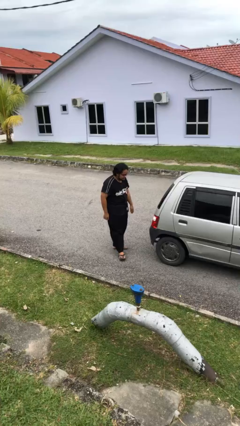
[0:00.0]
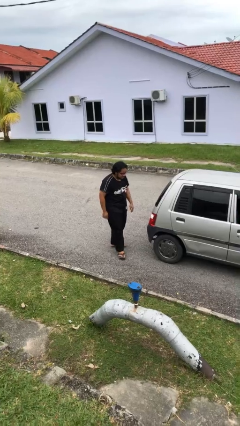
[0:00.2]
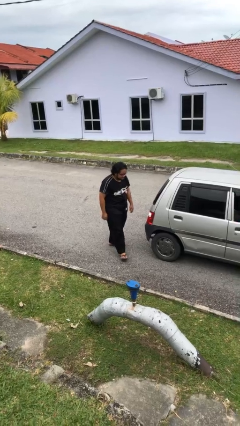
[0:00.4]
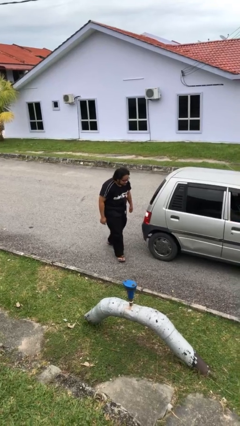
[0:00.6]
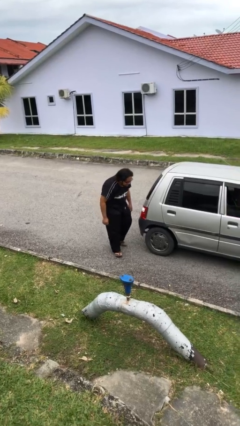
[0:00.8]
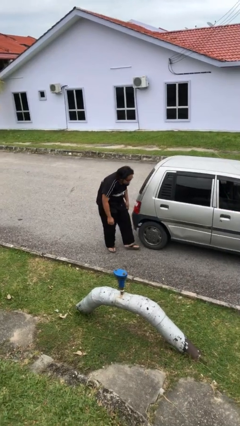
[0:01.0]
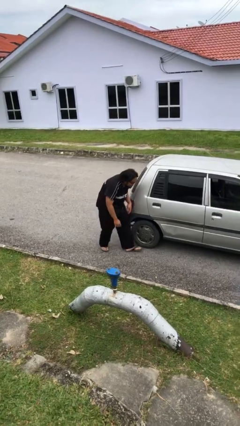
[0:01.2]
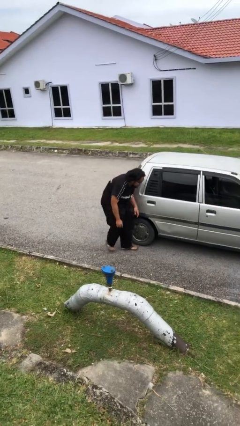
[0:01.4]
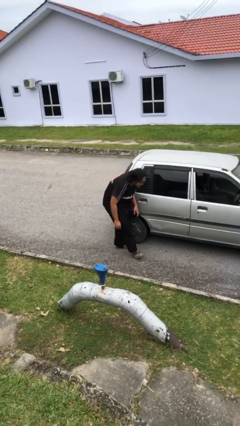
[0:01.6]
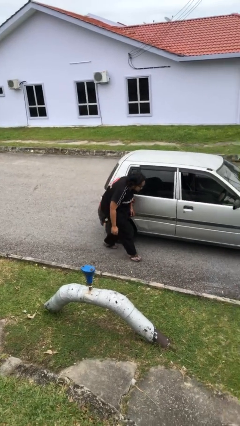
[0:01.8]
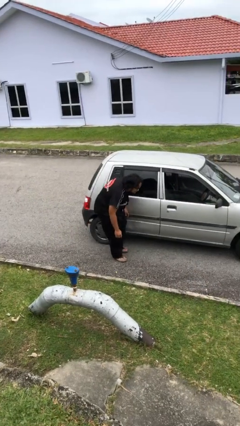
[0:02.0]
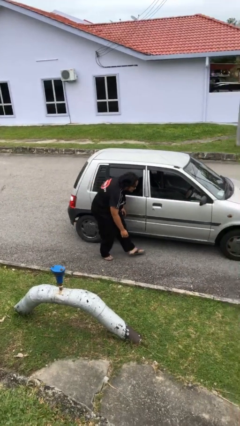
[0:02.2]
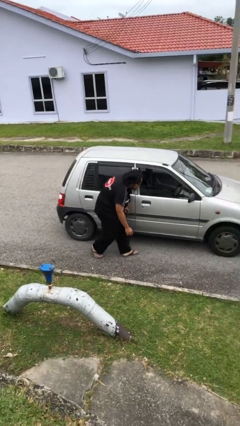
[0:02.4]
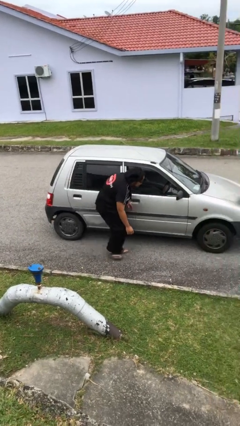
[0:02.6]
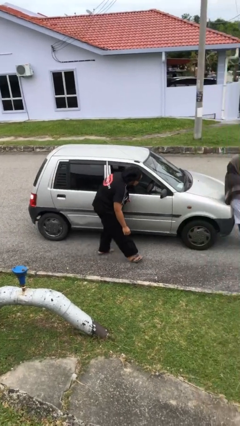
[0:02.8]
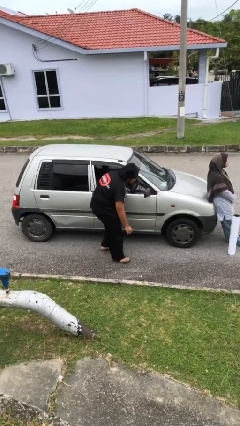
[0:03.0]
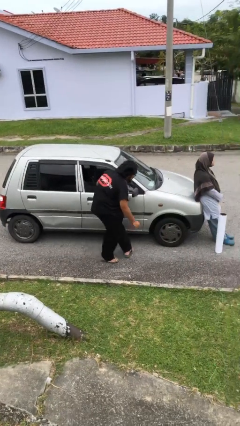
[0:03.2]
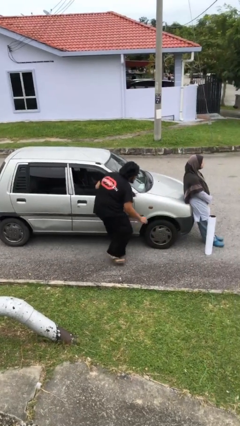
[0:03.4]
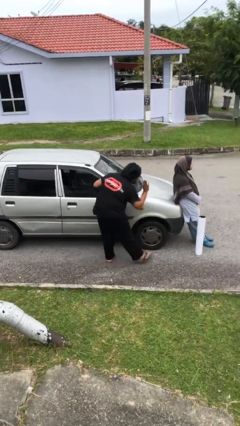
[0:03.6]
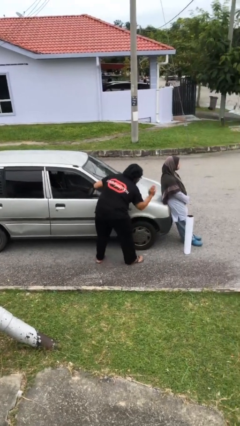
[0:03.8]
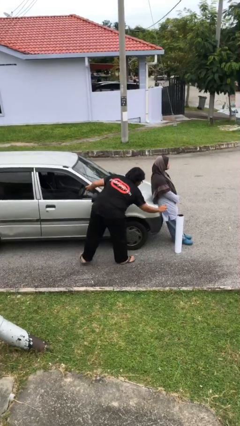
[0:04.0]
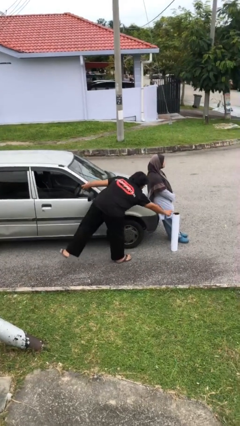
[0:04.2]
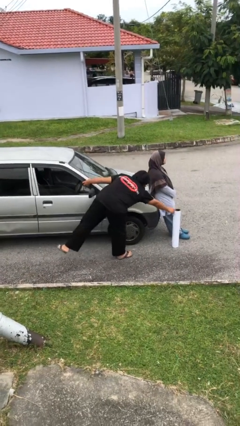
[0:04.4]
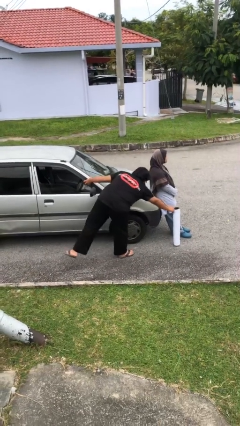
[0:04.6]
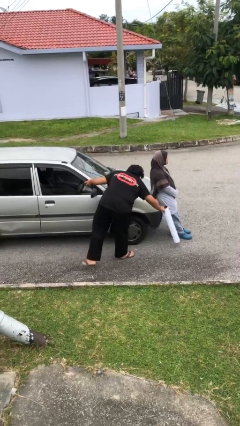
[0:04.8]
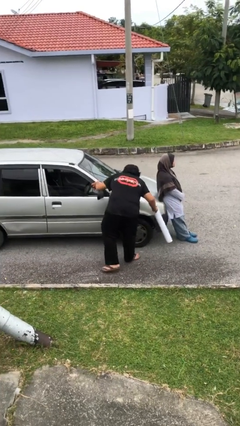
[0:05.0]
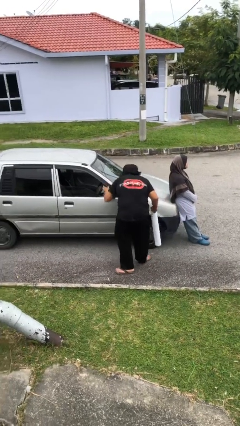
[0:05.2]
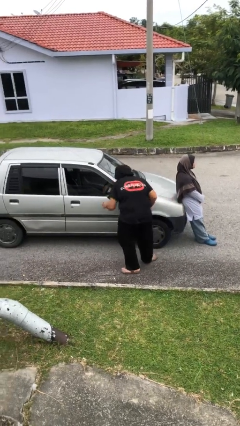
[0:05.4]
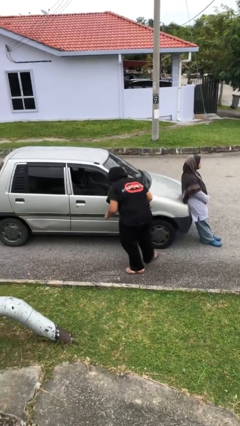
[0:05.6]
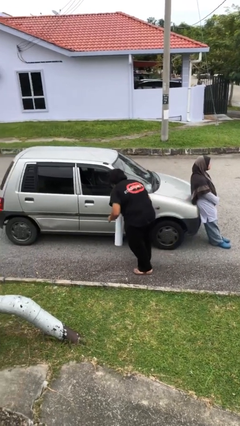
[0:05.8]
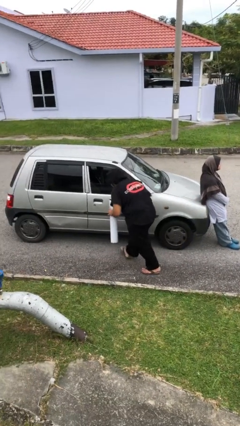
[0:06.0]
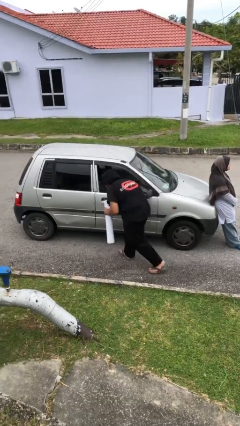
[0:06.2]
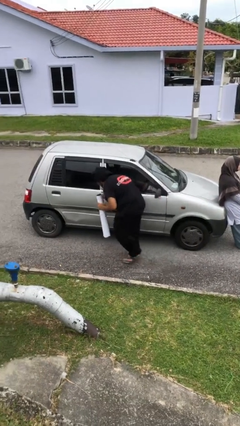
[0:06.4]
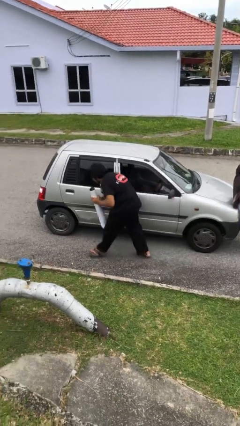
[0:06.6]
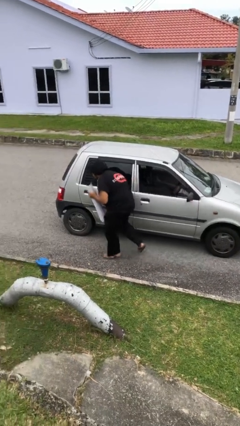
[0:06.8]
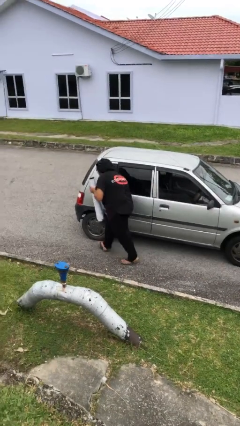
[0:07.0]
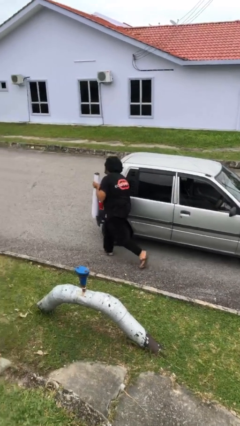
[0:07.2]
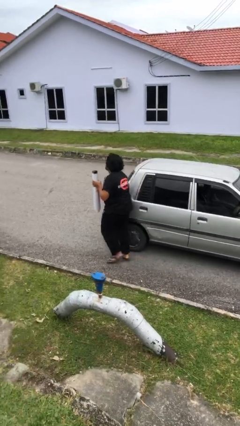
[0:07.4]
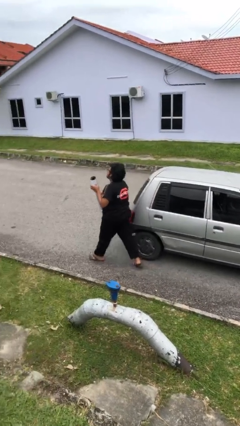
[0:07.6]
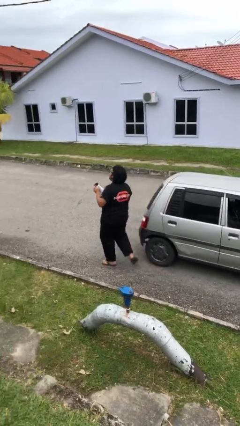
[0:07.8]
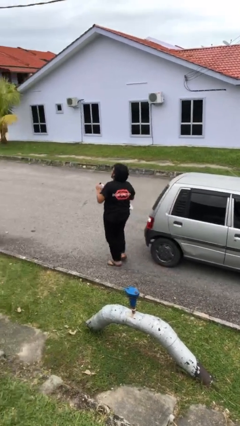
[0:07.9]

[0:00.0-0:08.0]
person steals object from person

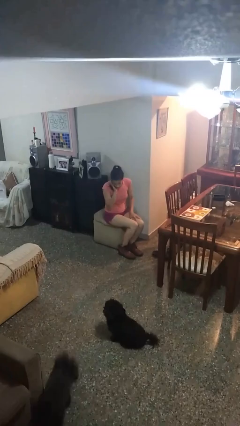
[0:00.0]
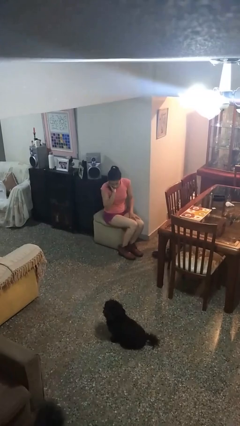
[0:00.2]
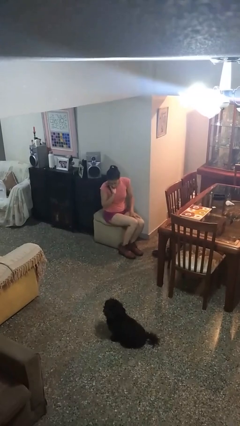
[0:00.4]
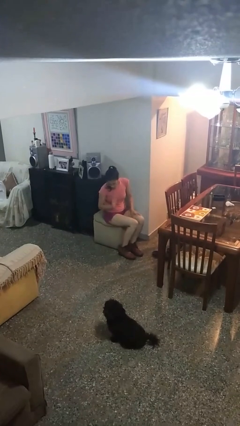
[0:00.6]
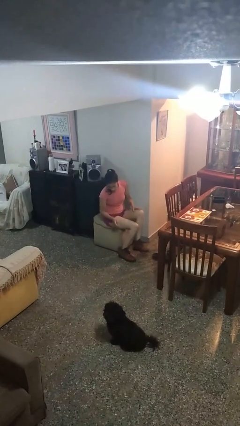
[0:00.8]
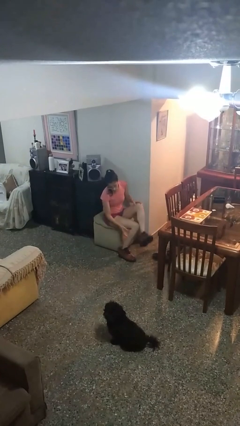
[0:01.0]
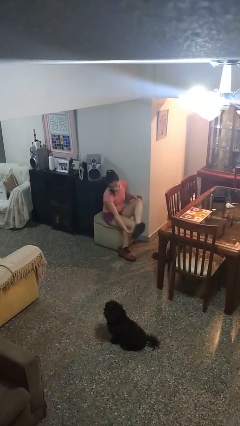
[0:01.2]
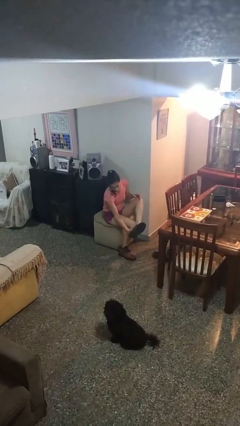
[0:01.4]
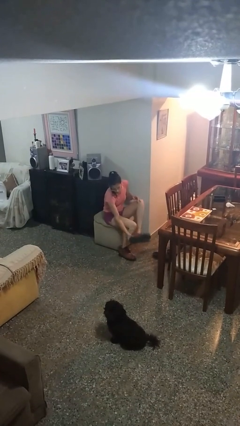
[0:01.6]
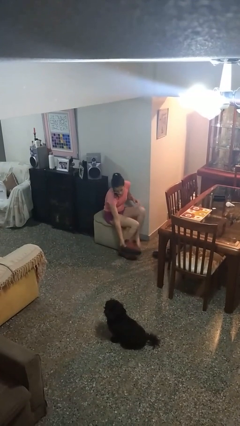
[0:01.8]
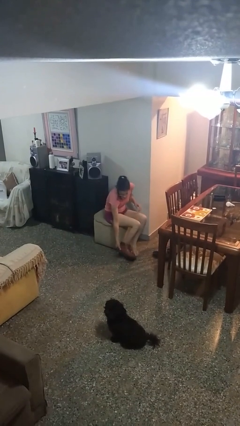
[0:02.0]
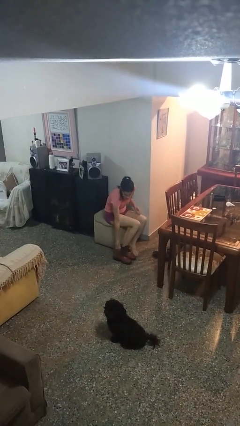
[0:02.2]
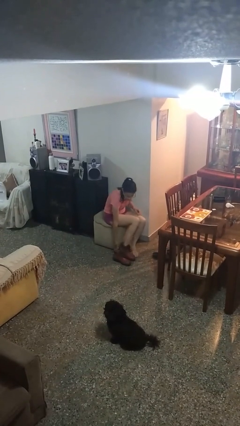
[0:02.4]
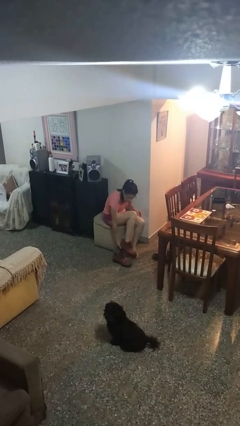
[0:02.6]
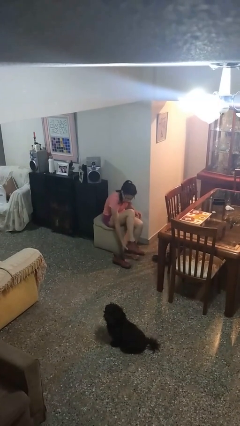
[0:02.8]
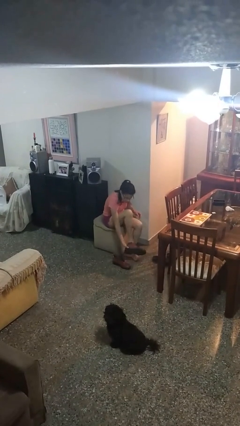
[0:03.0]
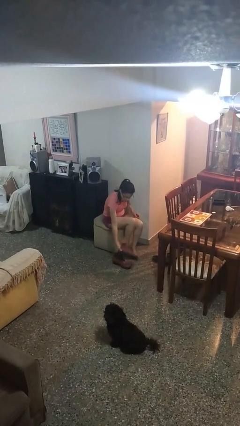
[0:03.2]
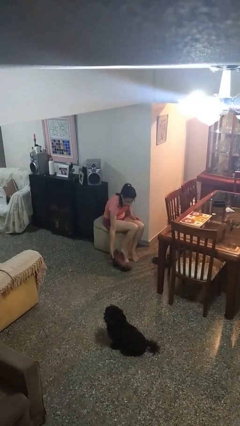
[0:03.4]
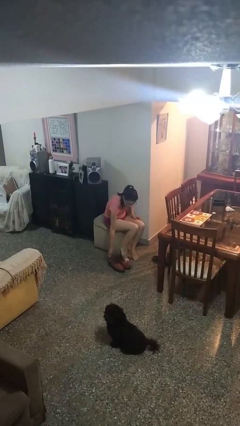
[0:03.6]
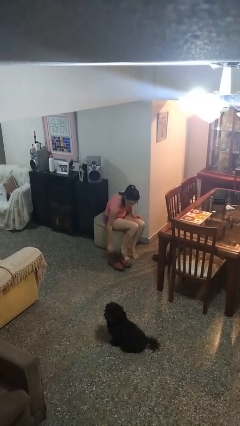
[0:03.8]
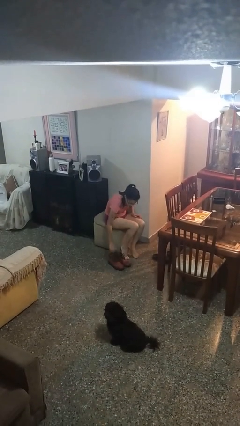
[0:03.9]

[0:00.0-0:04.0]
person takes off boots

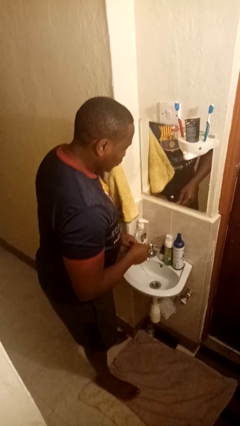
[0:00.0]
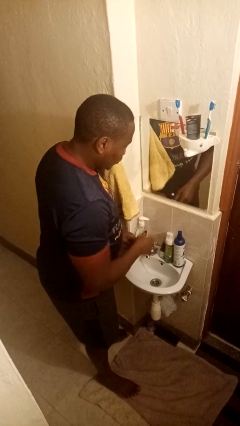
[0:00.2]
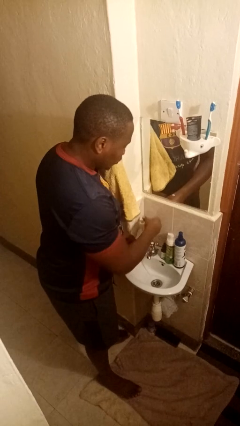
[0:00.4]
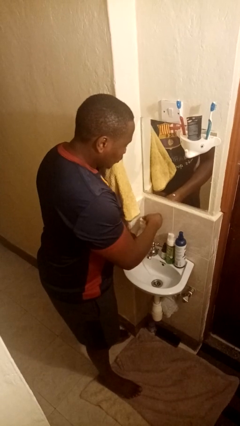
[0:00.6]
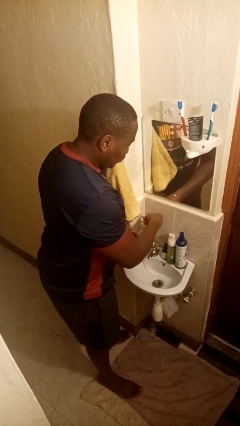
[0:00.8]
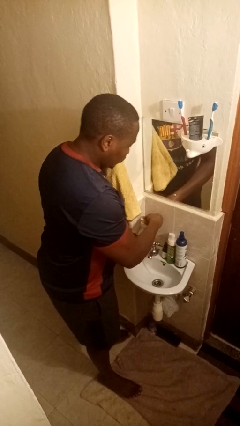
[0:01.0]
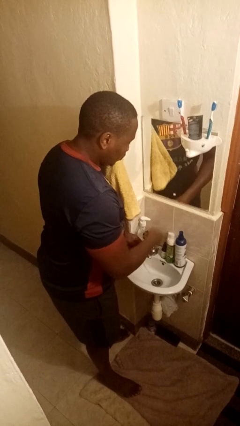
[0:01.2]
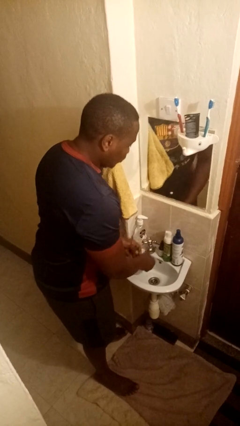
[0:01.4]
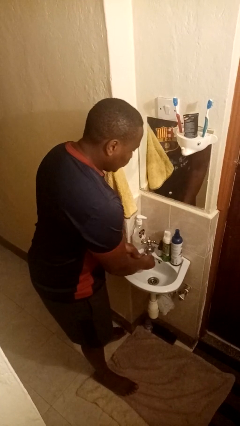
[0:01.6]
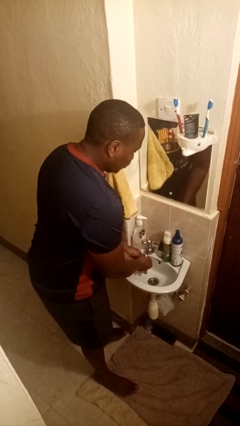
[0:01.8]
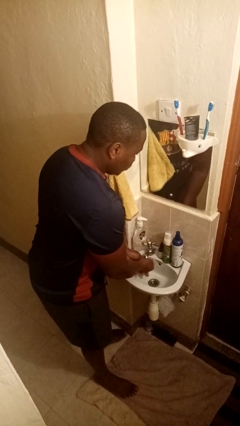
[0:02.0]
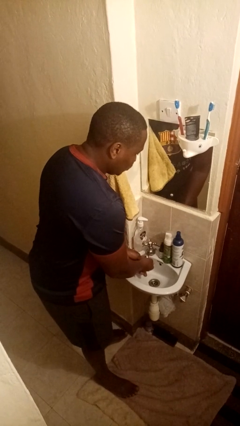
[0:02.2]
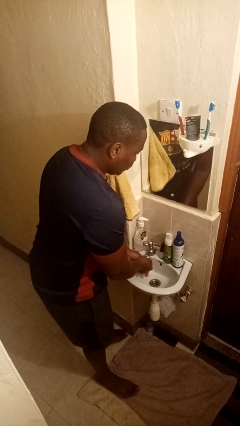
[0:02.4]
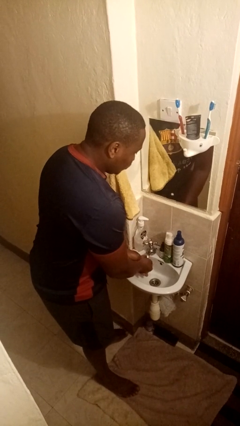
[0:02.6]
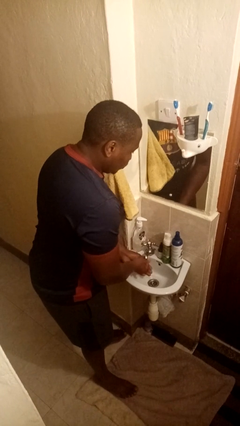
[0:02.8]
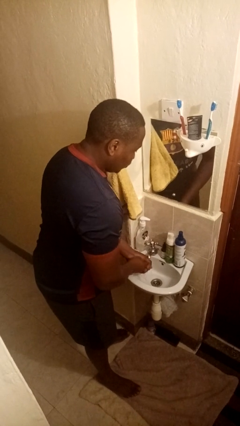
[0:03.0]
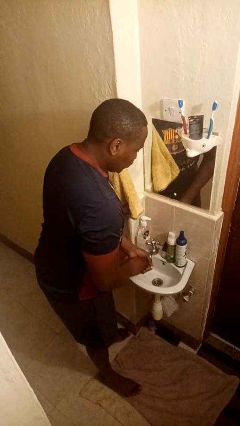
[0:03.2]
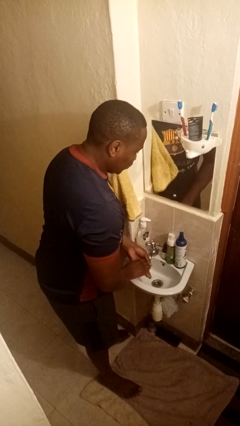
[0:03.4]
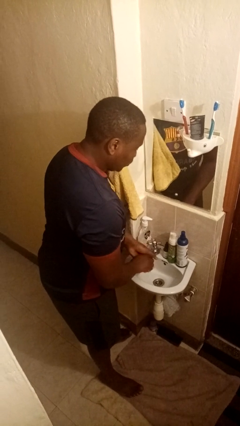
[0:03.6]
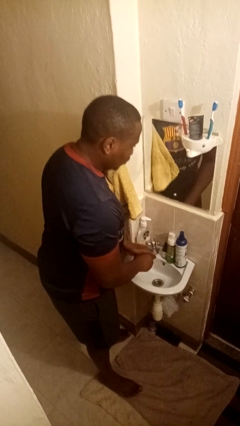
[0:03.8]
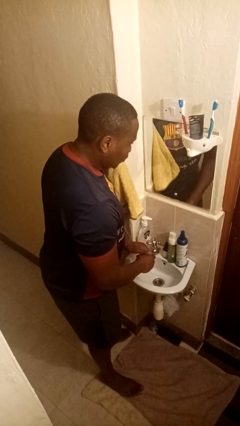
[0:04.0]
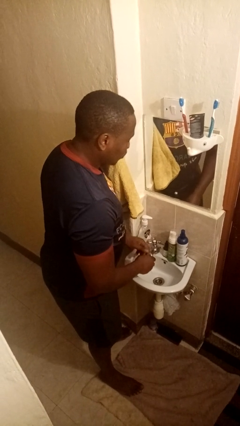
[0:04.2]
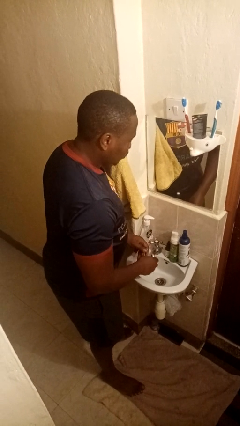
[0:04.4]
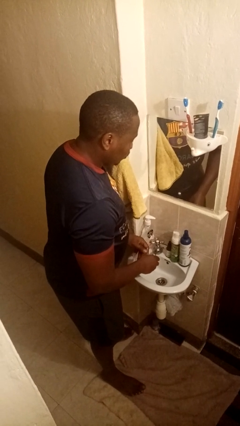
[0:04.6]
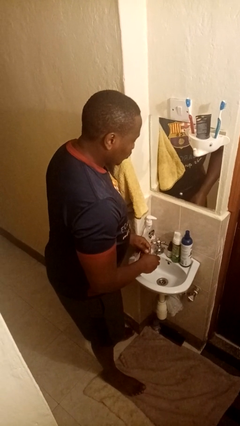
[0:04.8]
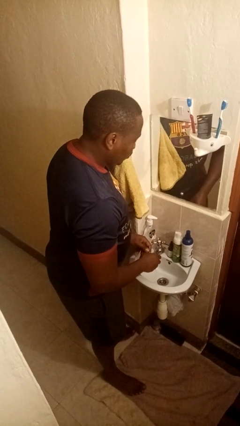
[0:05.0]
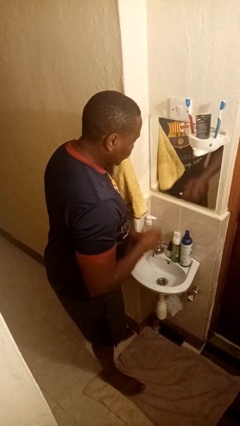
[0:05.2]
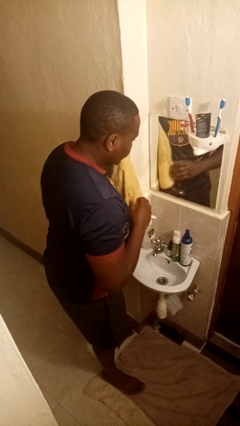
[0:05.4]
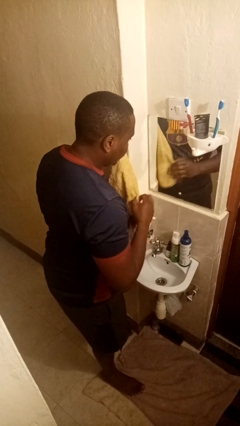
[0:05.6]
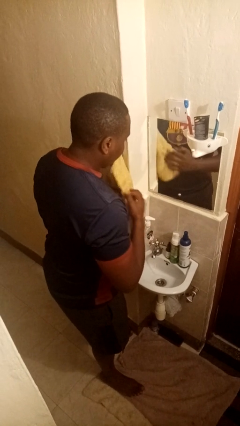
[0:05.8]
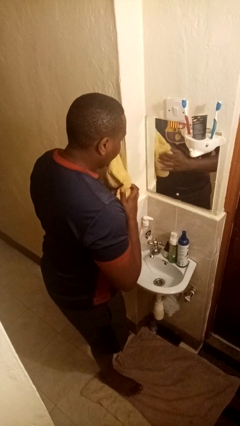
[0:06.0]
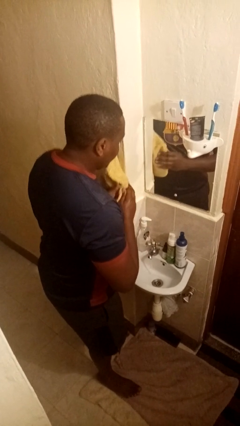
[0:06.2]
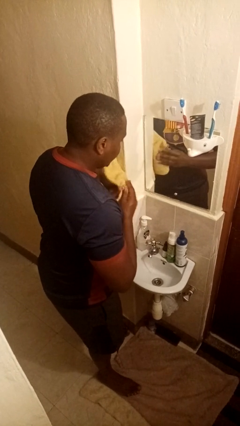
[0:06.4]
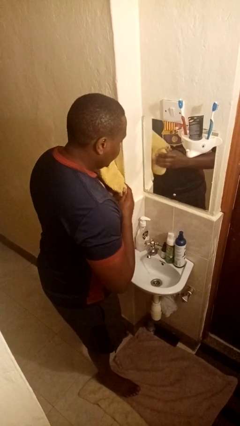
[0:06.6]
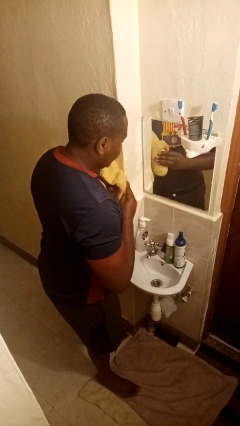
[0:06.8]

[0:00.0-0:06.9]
person washes hands
